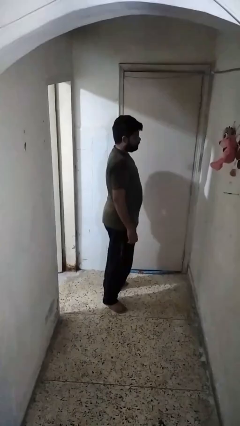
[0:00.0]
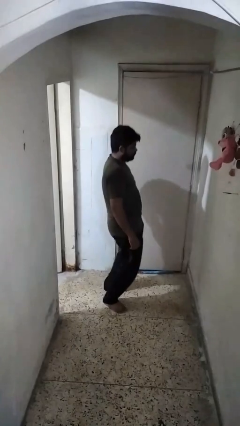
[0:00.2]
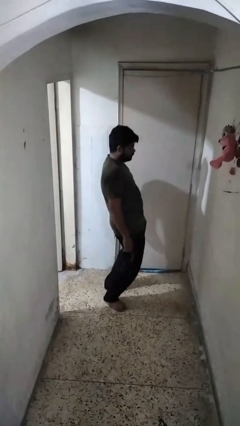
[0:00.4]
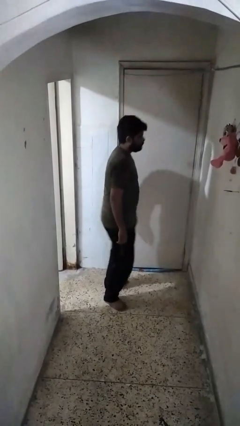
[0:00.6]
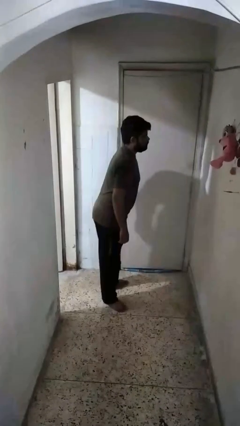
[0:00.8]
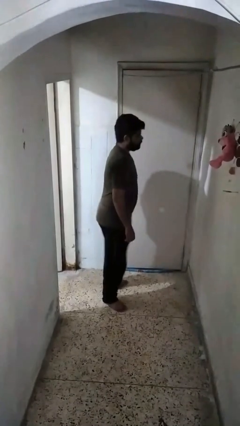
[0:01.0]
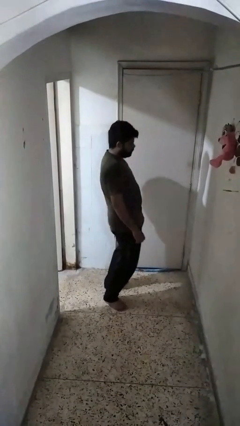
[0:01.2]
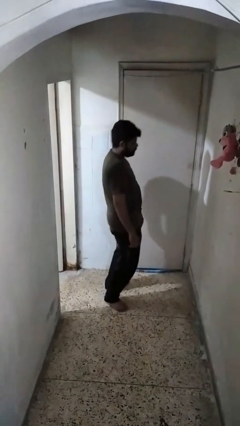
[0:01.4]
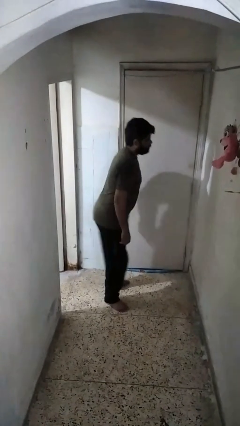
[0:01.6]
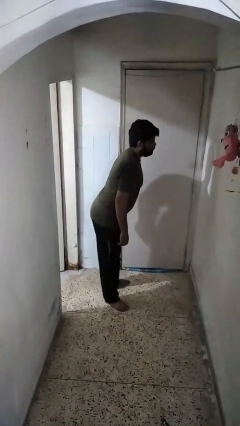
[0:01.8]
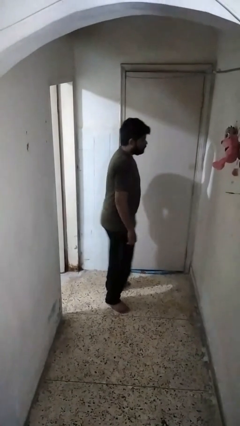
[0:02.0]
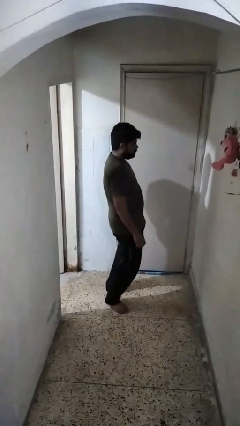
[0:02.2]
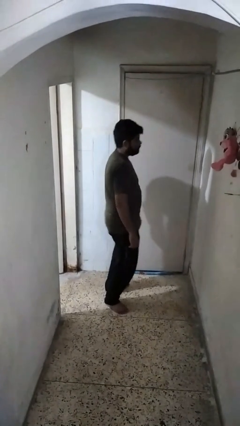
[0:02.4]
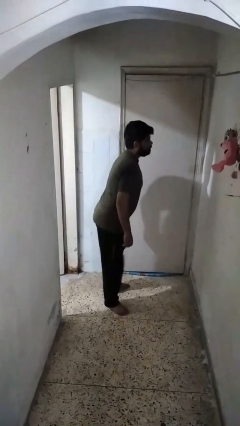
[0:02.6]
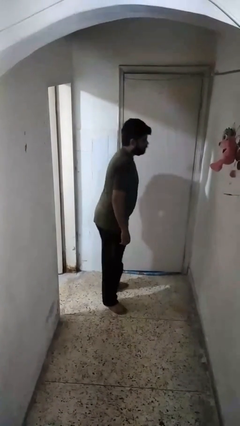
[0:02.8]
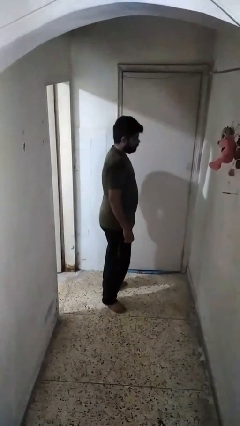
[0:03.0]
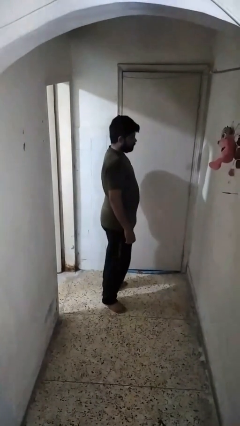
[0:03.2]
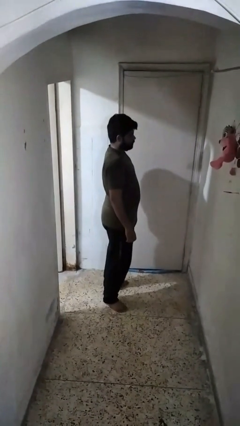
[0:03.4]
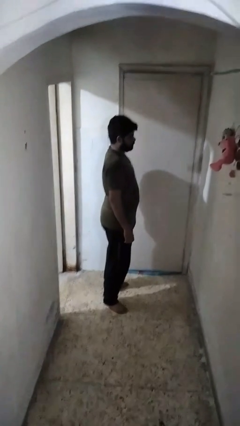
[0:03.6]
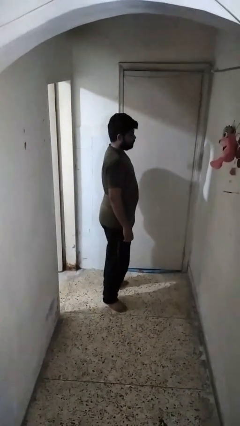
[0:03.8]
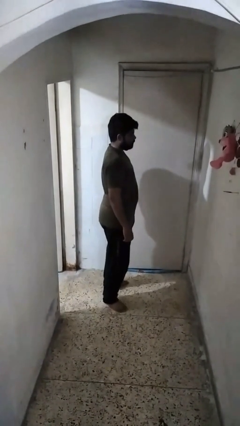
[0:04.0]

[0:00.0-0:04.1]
person wiggles hips

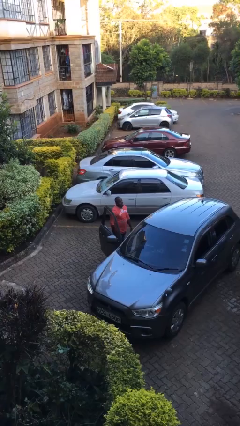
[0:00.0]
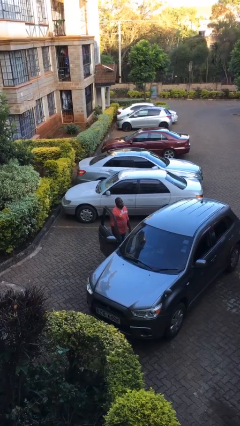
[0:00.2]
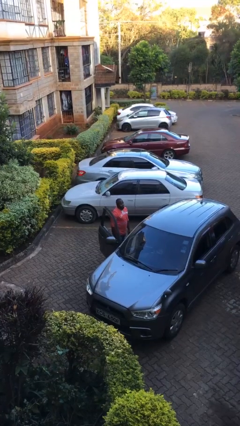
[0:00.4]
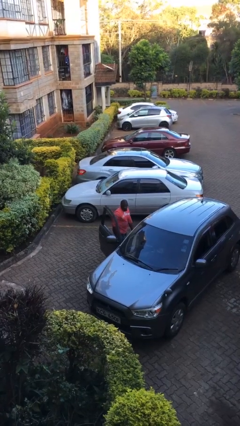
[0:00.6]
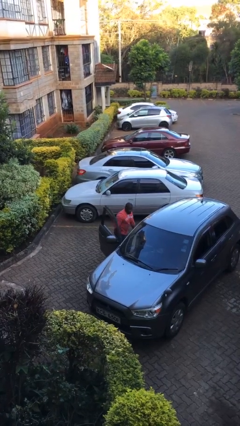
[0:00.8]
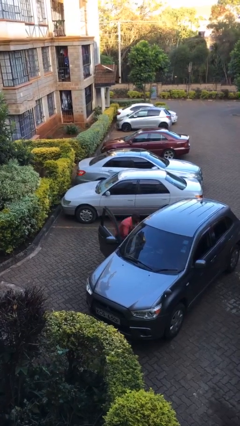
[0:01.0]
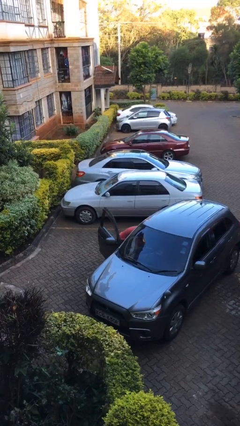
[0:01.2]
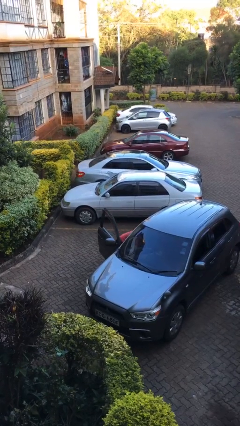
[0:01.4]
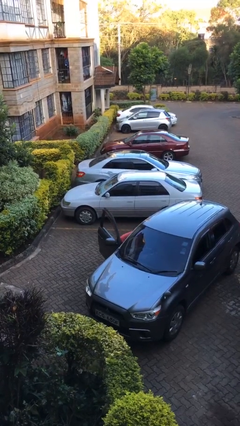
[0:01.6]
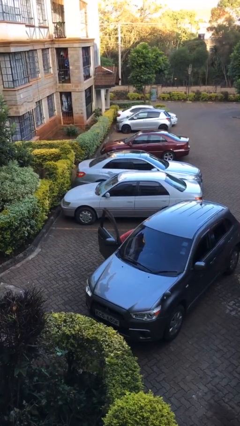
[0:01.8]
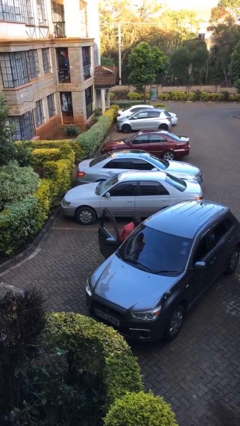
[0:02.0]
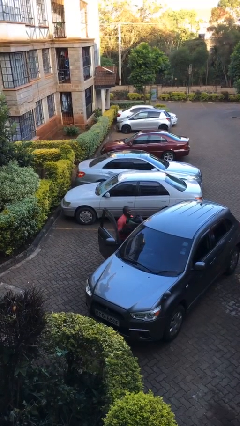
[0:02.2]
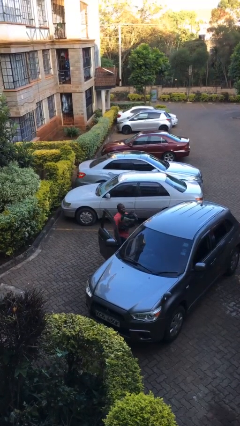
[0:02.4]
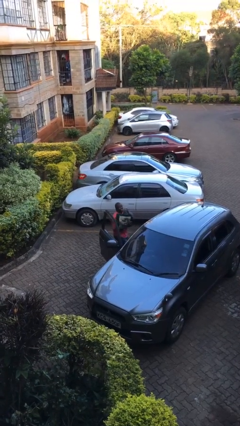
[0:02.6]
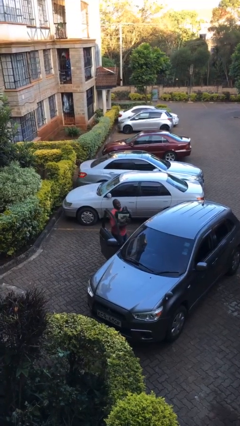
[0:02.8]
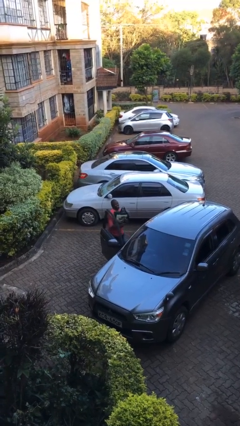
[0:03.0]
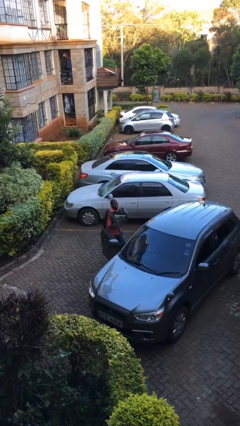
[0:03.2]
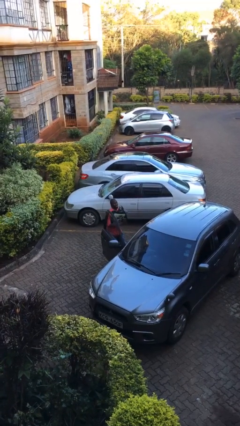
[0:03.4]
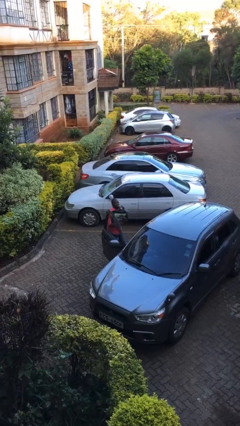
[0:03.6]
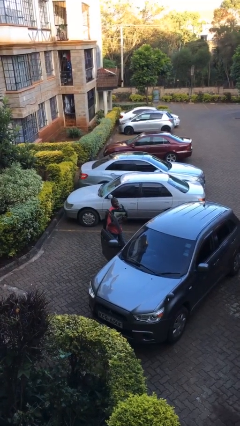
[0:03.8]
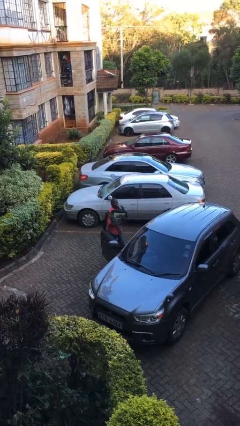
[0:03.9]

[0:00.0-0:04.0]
person unloads car

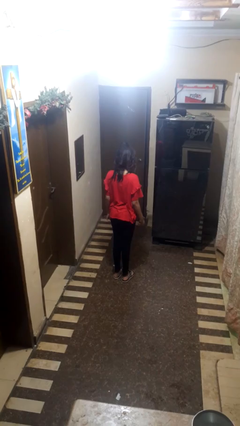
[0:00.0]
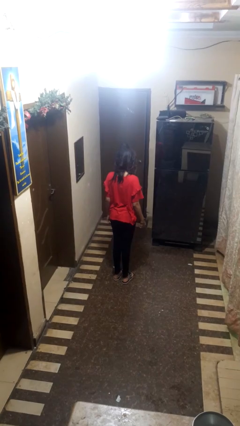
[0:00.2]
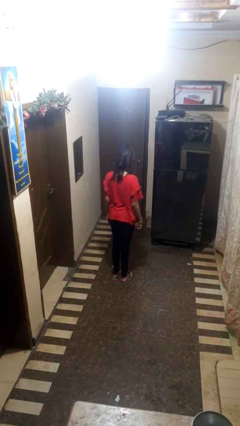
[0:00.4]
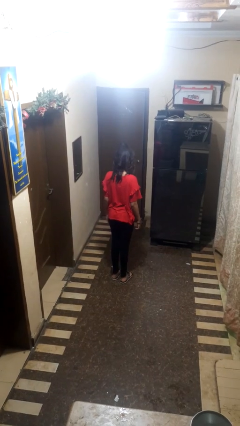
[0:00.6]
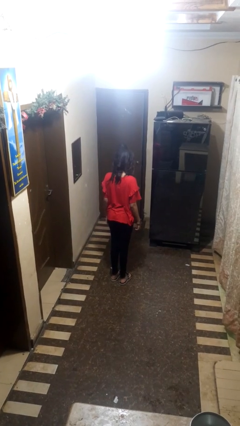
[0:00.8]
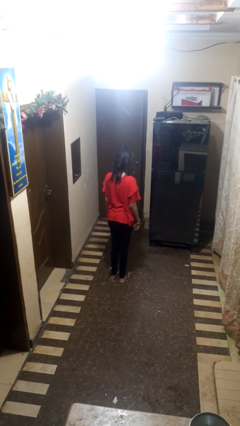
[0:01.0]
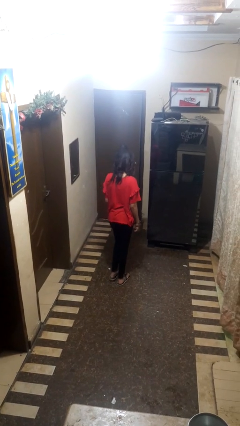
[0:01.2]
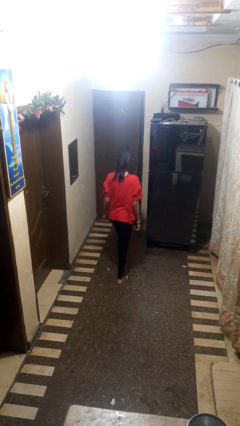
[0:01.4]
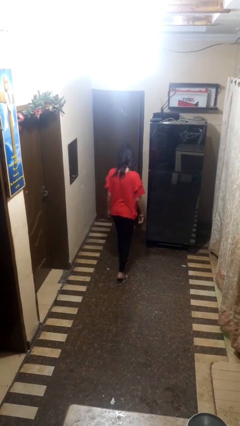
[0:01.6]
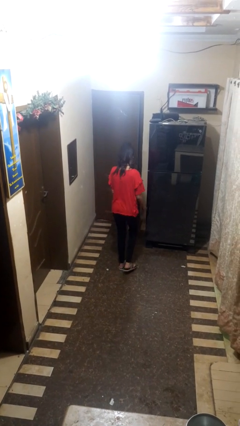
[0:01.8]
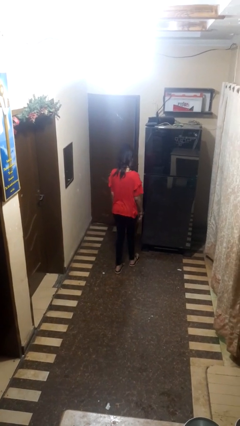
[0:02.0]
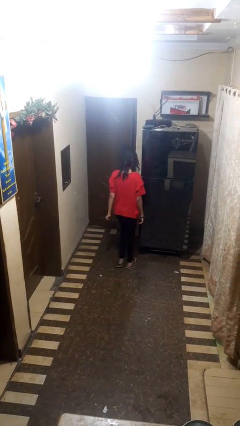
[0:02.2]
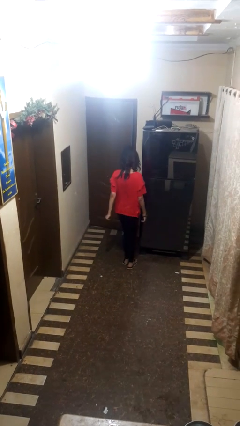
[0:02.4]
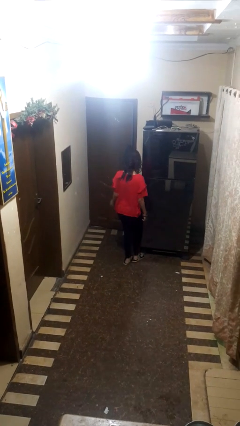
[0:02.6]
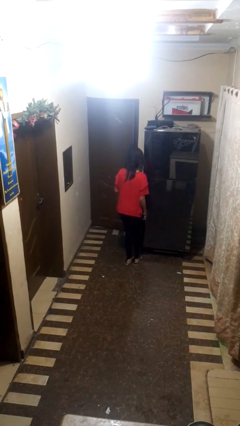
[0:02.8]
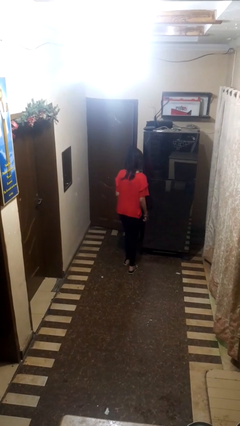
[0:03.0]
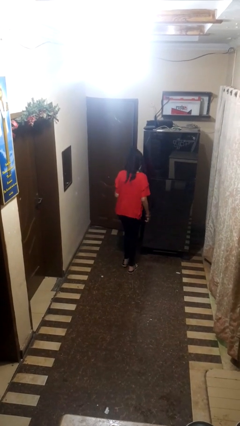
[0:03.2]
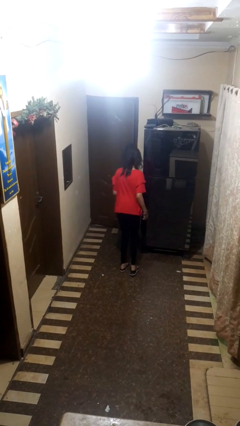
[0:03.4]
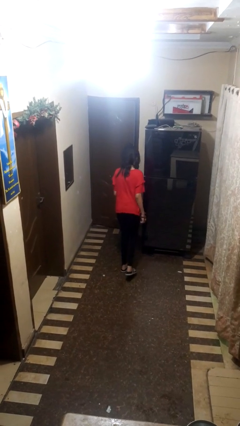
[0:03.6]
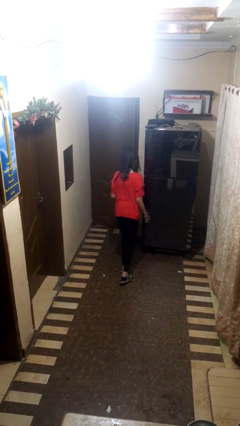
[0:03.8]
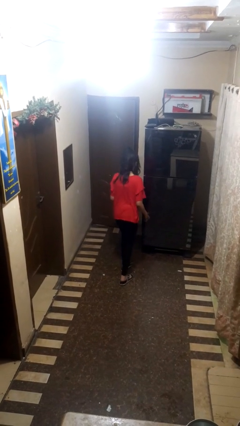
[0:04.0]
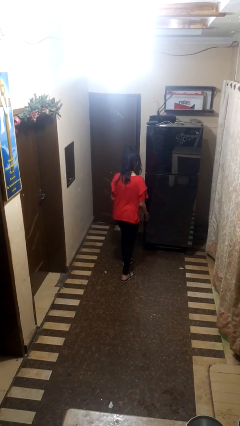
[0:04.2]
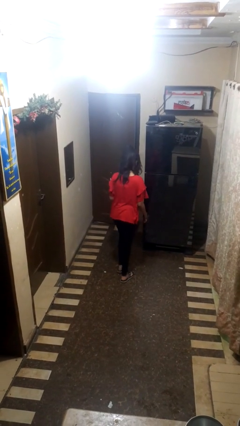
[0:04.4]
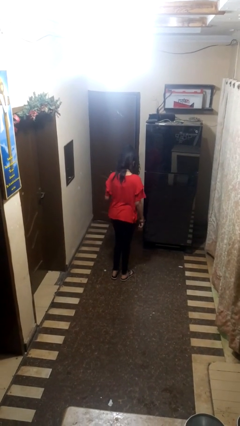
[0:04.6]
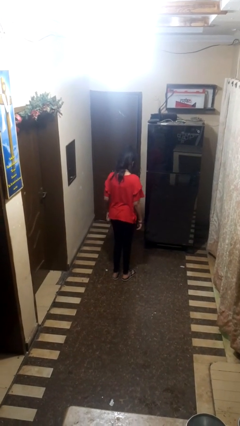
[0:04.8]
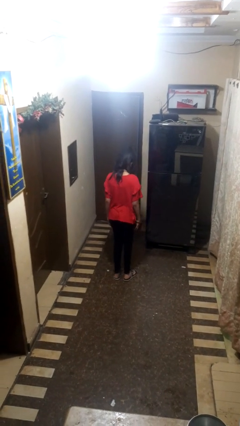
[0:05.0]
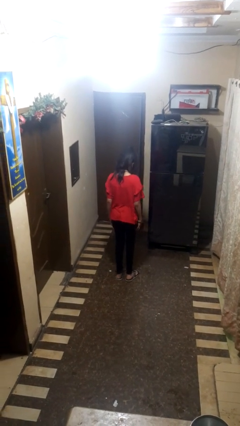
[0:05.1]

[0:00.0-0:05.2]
person stubs toe

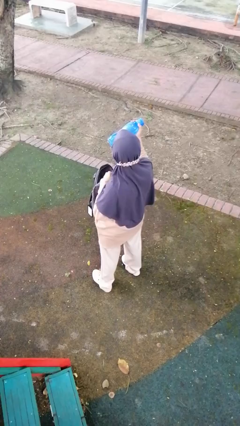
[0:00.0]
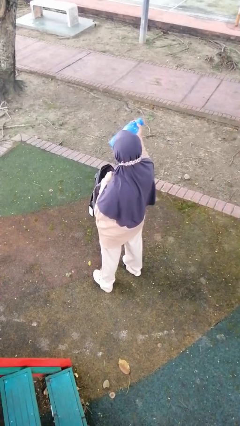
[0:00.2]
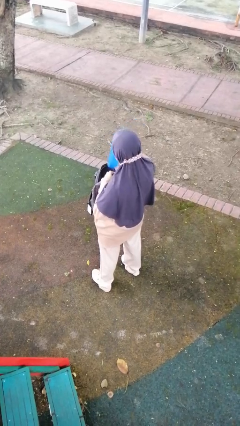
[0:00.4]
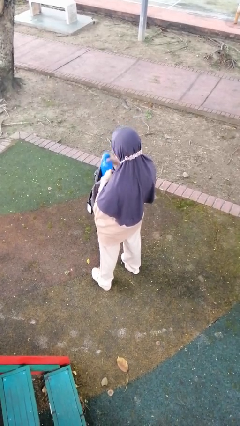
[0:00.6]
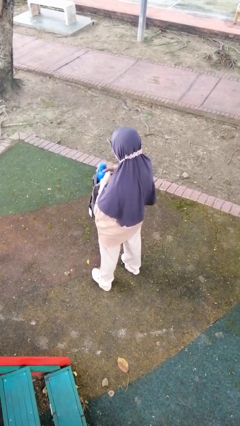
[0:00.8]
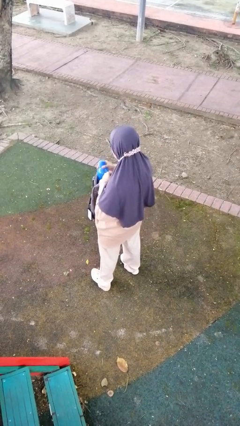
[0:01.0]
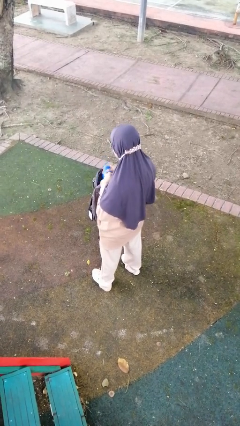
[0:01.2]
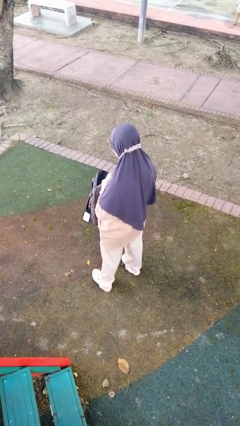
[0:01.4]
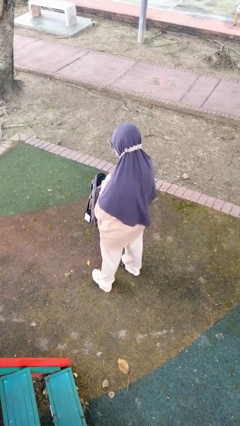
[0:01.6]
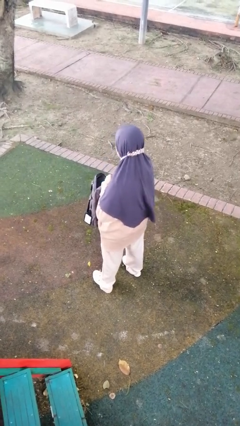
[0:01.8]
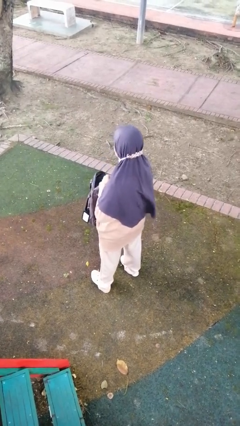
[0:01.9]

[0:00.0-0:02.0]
person puts object into backpack

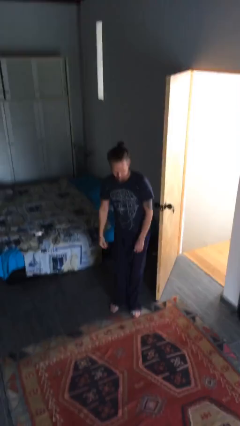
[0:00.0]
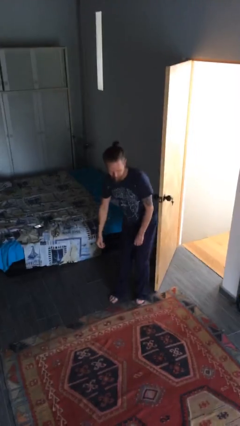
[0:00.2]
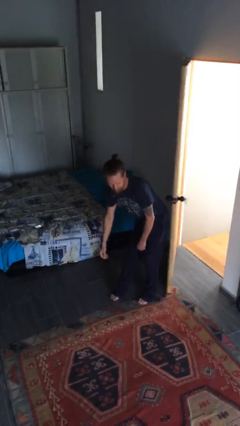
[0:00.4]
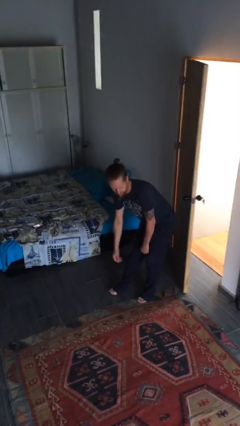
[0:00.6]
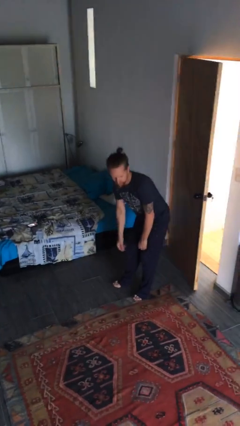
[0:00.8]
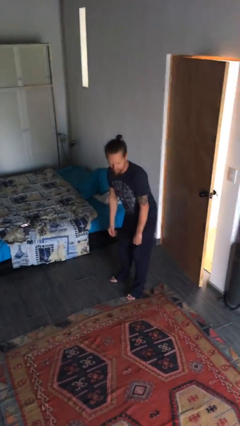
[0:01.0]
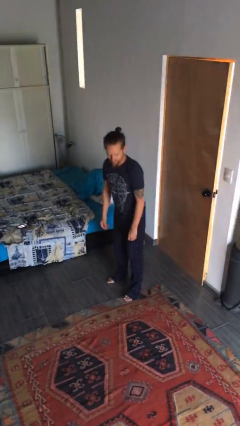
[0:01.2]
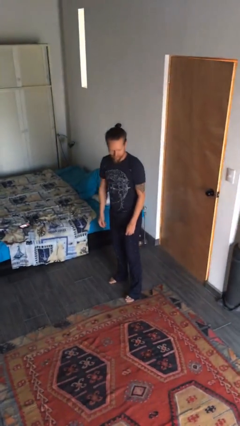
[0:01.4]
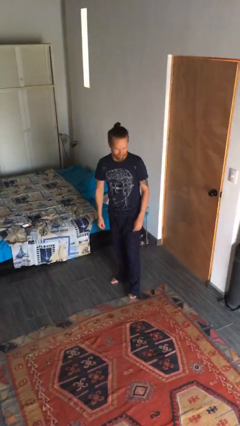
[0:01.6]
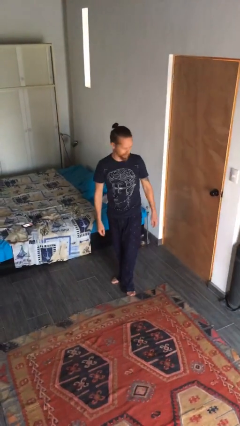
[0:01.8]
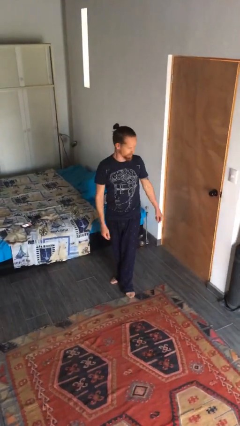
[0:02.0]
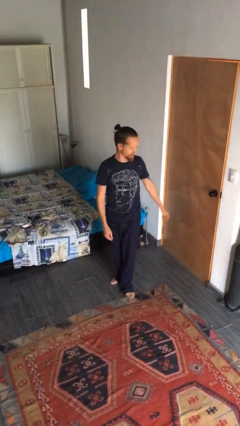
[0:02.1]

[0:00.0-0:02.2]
person closes door with hip
